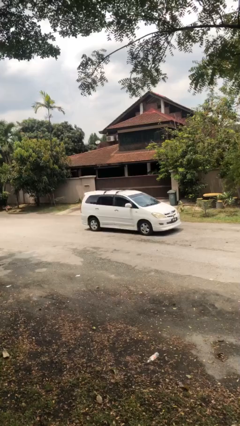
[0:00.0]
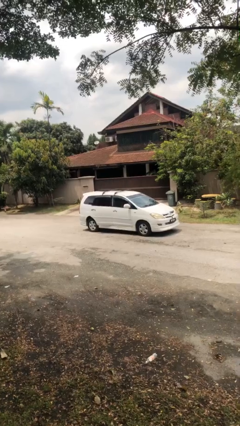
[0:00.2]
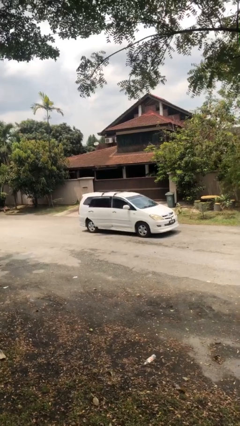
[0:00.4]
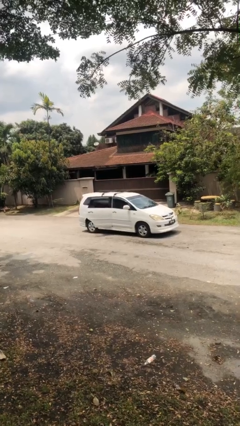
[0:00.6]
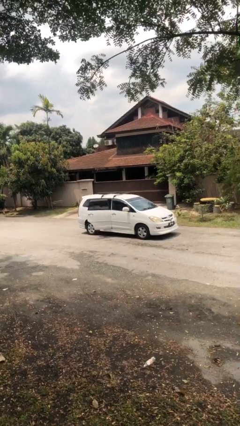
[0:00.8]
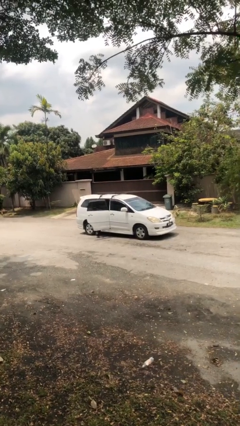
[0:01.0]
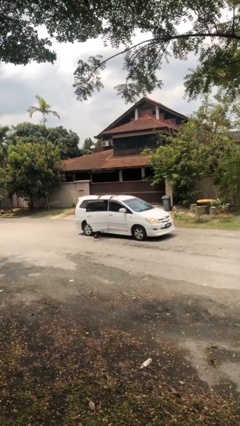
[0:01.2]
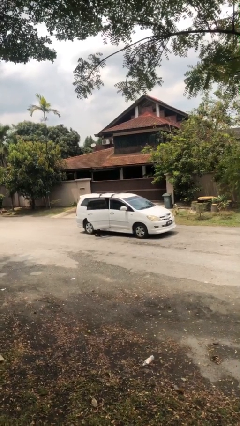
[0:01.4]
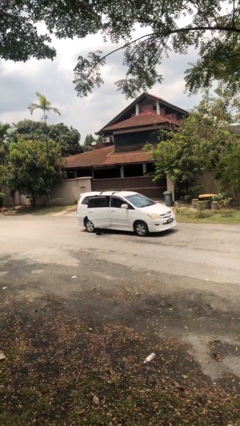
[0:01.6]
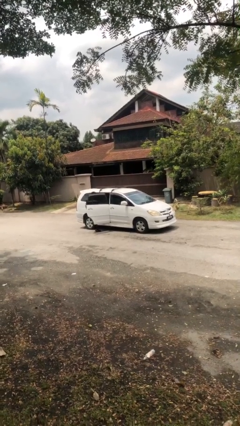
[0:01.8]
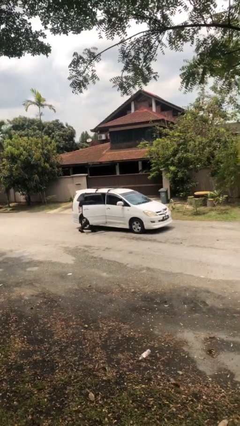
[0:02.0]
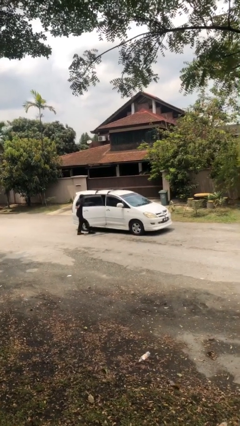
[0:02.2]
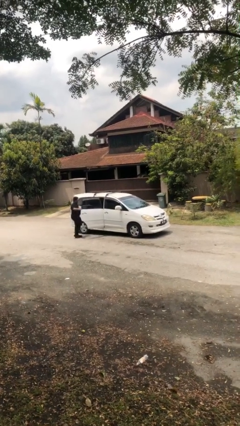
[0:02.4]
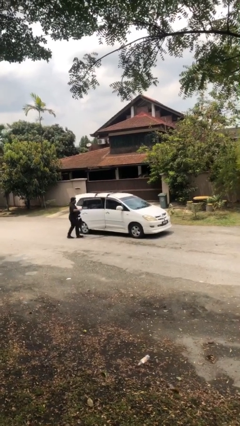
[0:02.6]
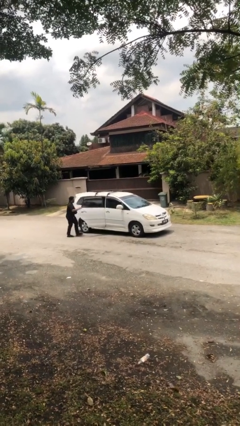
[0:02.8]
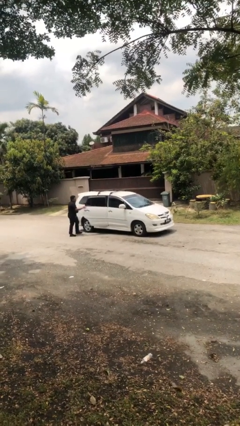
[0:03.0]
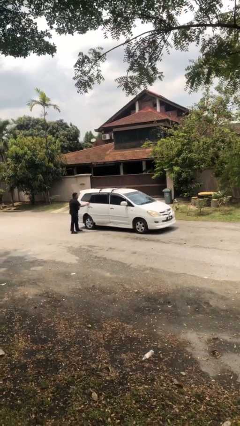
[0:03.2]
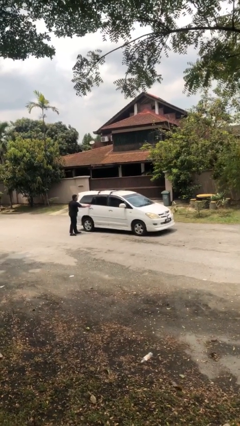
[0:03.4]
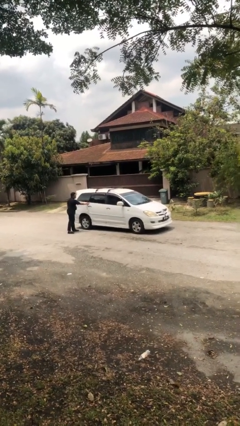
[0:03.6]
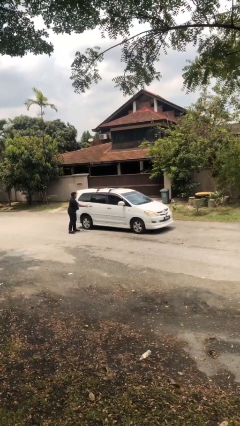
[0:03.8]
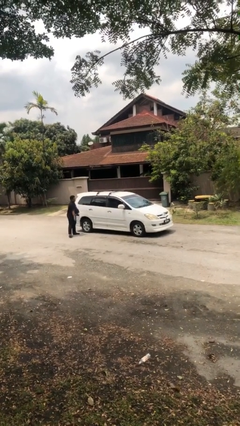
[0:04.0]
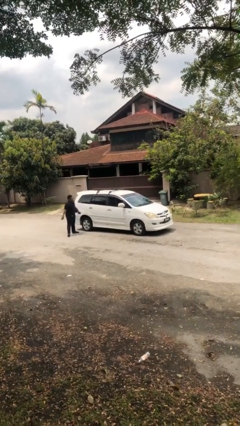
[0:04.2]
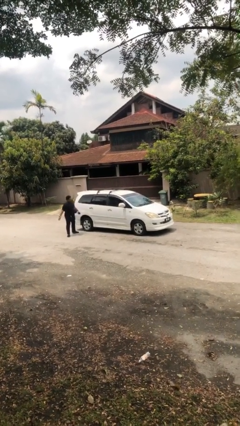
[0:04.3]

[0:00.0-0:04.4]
car drops off person

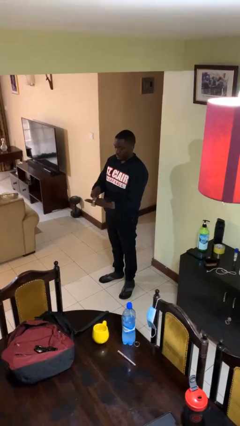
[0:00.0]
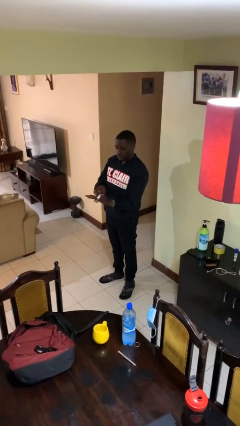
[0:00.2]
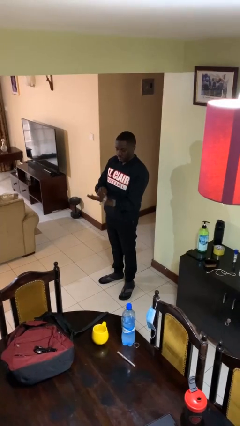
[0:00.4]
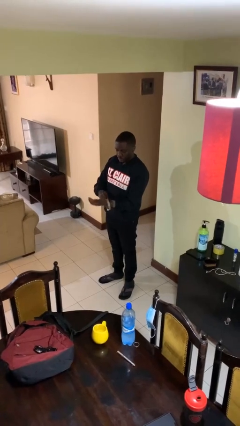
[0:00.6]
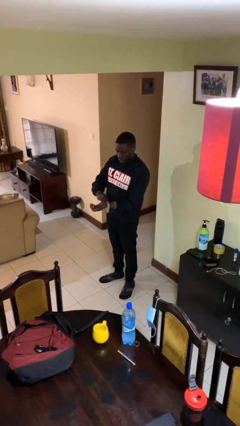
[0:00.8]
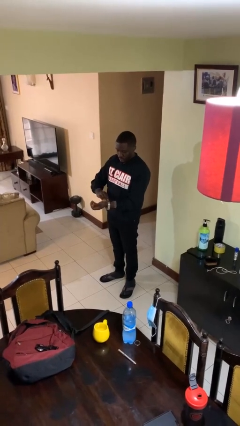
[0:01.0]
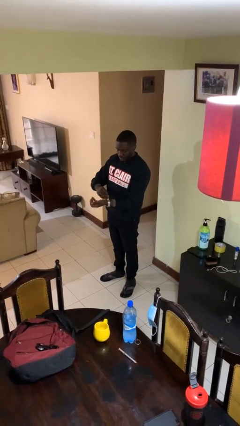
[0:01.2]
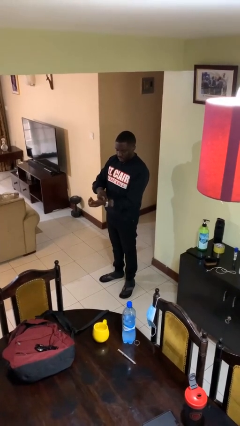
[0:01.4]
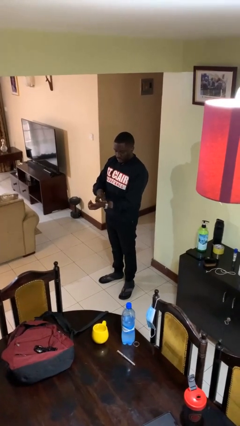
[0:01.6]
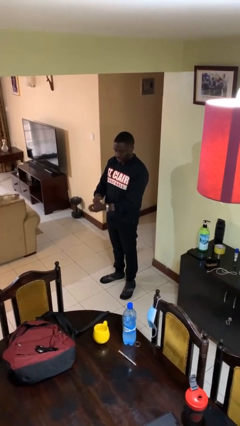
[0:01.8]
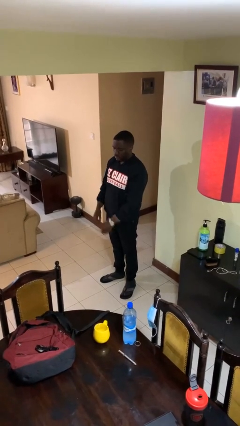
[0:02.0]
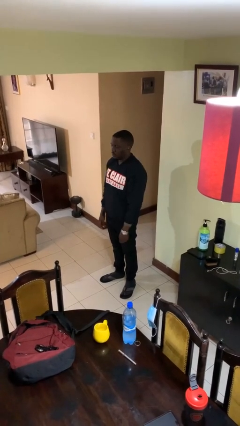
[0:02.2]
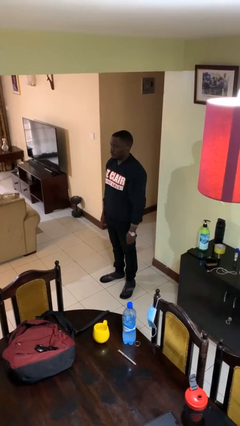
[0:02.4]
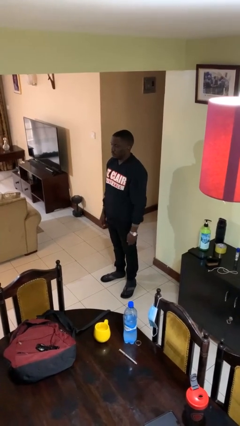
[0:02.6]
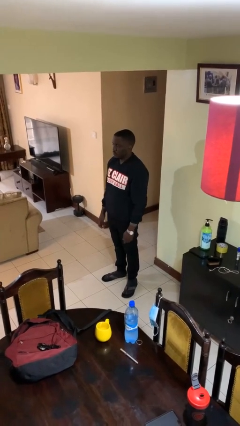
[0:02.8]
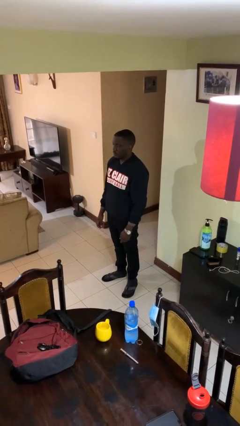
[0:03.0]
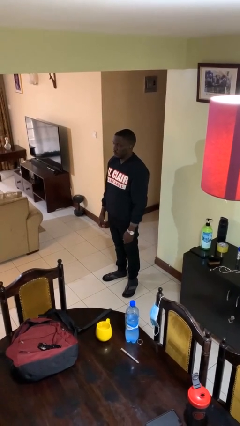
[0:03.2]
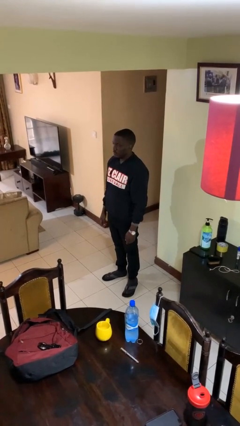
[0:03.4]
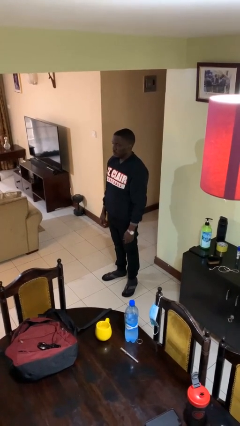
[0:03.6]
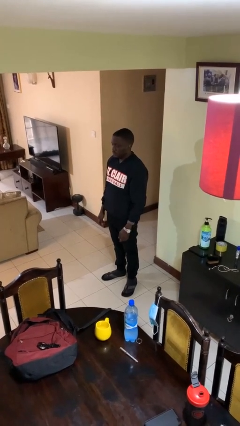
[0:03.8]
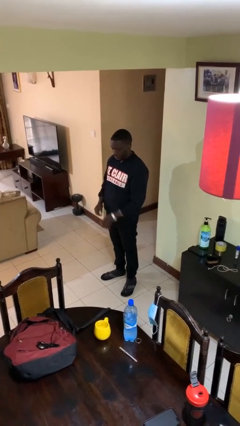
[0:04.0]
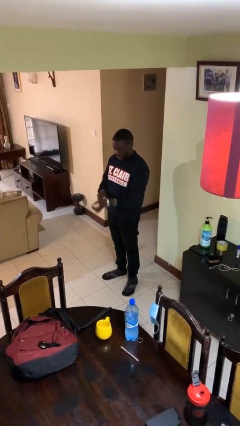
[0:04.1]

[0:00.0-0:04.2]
person puts on wristwatch

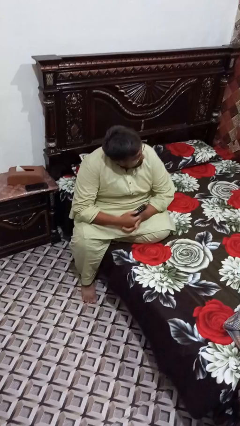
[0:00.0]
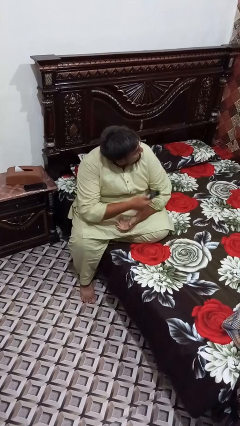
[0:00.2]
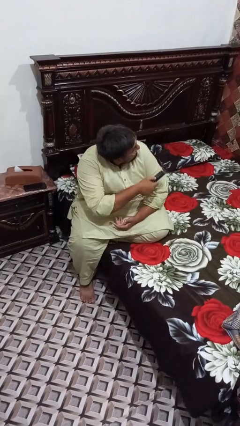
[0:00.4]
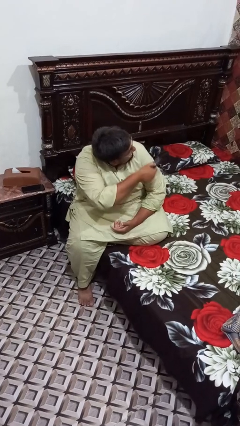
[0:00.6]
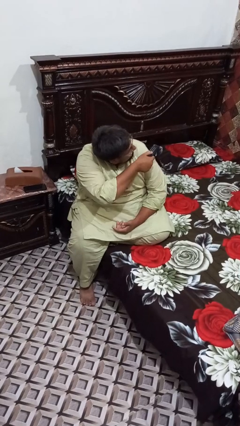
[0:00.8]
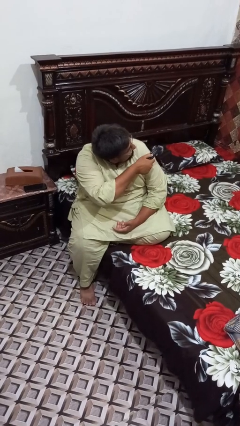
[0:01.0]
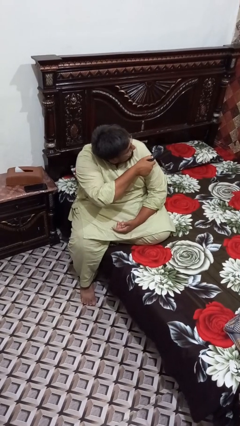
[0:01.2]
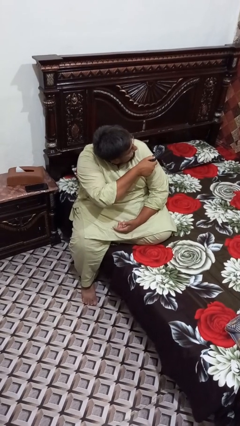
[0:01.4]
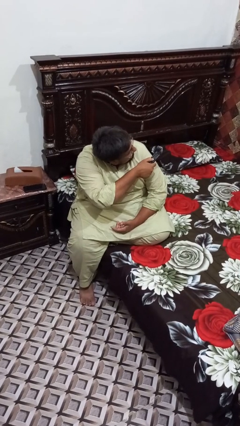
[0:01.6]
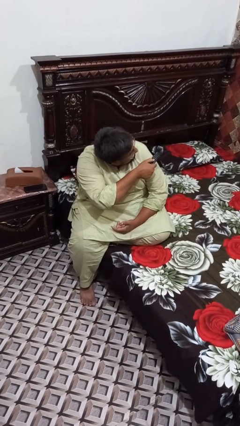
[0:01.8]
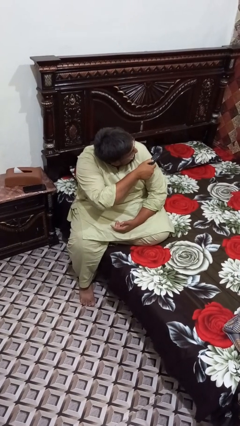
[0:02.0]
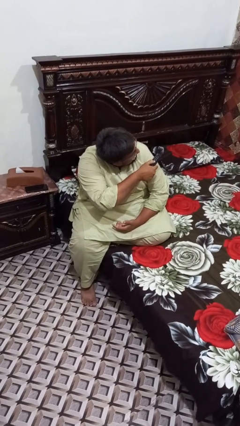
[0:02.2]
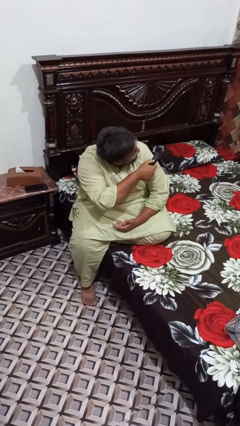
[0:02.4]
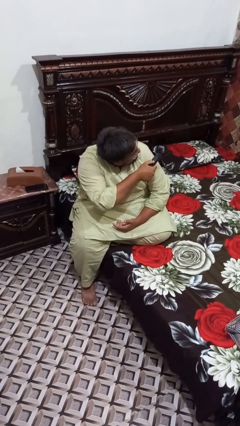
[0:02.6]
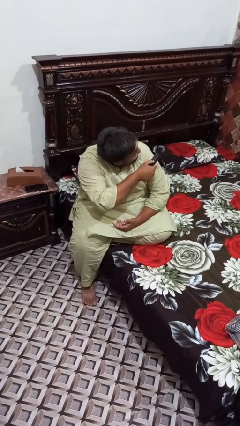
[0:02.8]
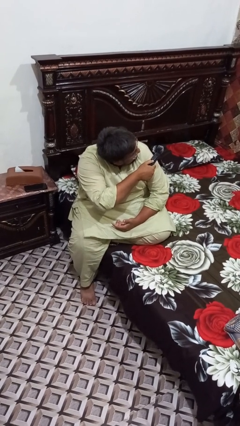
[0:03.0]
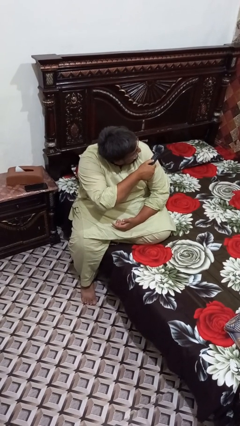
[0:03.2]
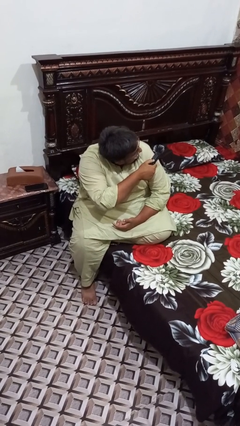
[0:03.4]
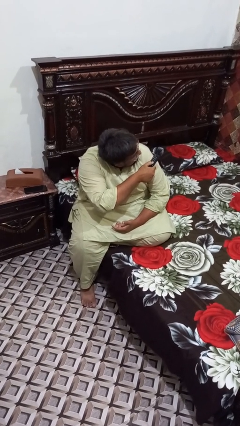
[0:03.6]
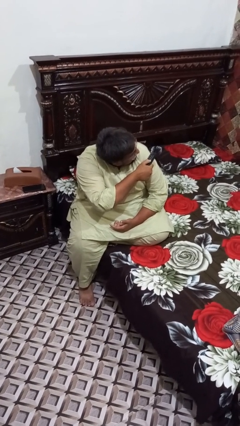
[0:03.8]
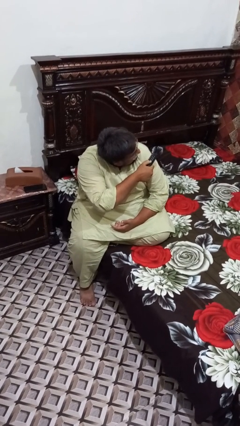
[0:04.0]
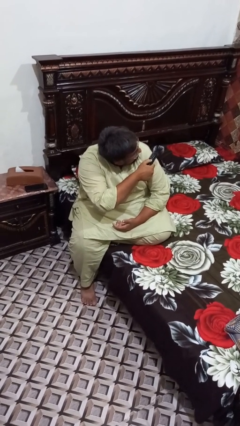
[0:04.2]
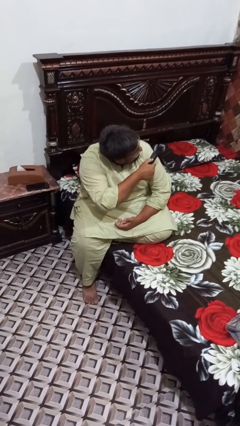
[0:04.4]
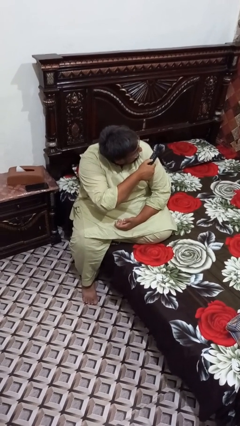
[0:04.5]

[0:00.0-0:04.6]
person uses television remote

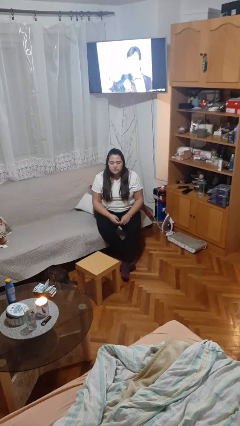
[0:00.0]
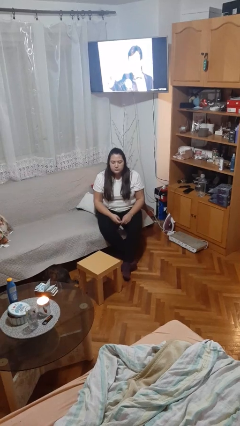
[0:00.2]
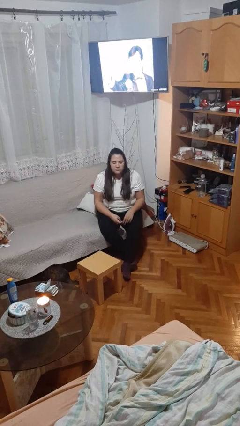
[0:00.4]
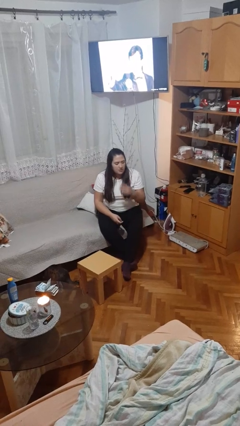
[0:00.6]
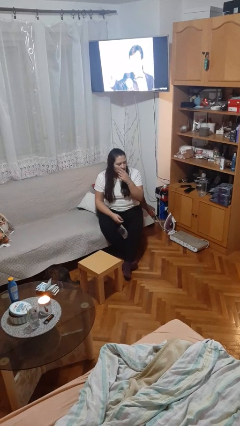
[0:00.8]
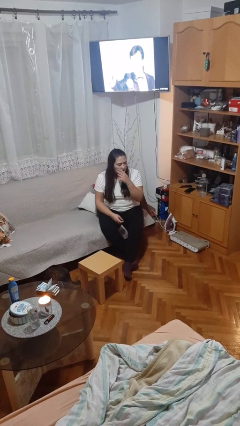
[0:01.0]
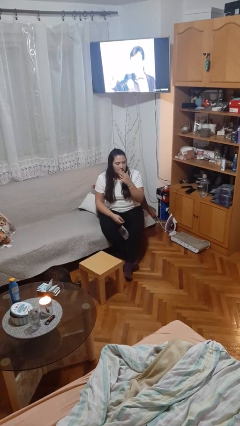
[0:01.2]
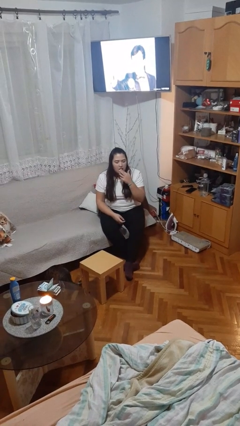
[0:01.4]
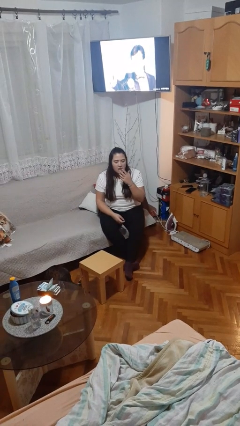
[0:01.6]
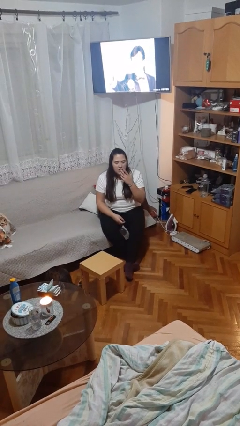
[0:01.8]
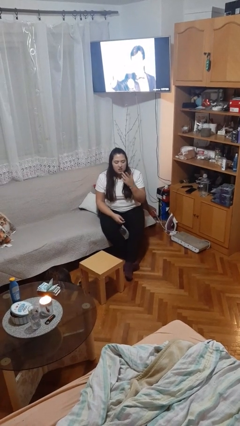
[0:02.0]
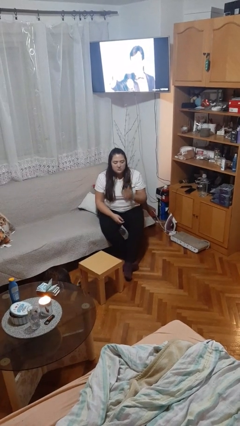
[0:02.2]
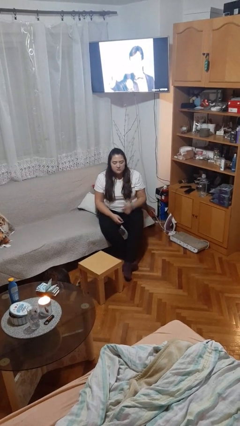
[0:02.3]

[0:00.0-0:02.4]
person licks fingers

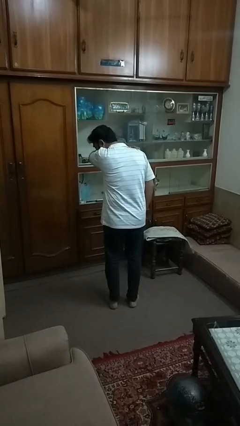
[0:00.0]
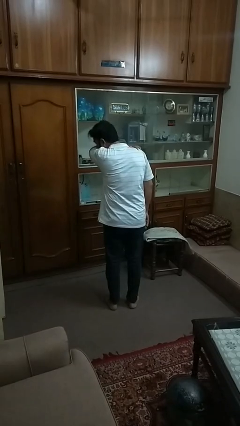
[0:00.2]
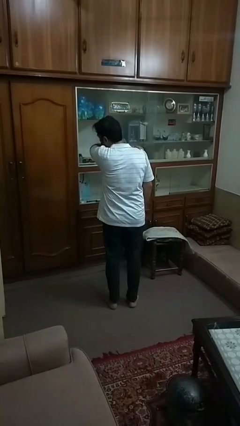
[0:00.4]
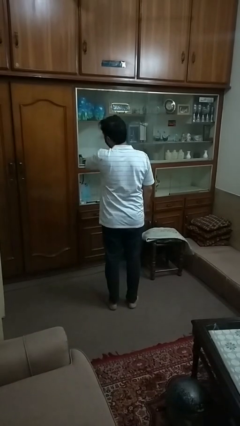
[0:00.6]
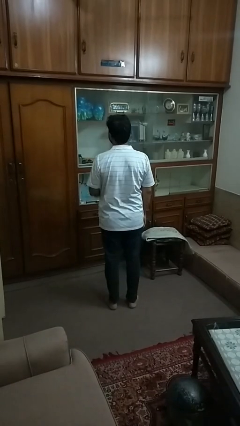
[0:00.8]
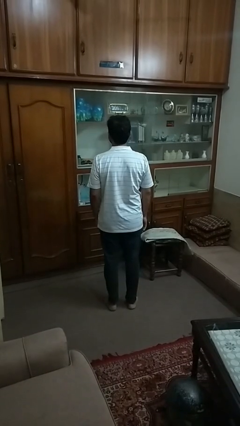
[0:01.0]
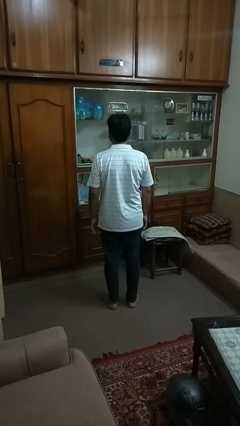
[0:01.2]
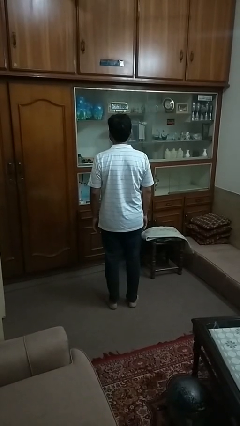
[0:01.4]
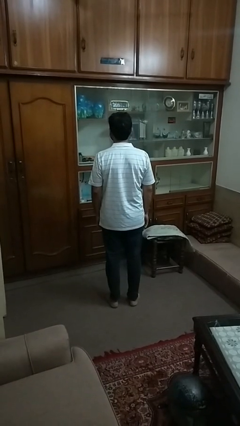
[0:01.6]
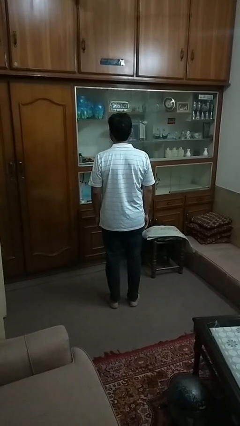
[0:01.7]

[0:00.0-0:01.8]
person sneezes into arm

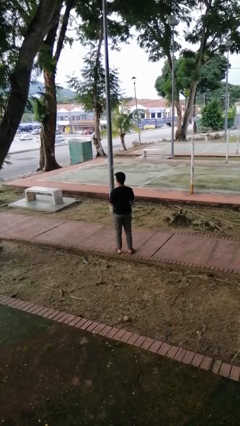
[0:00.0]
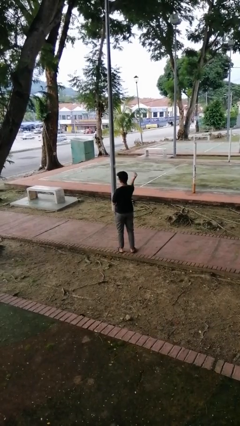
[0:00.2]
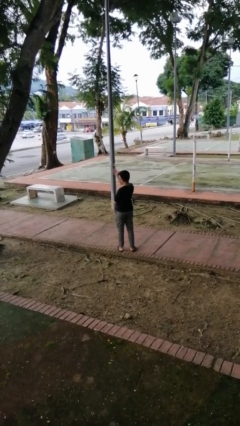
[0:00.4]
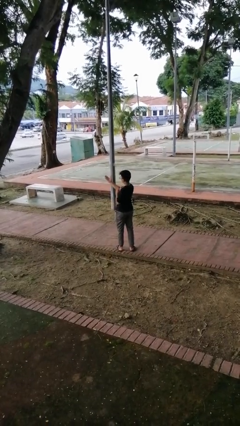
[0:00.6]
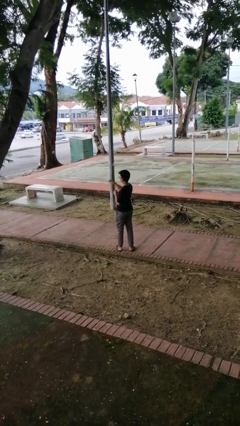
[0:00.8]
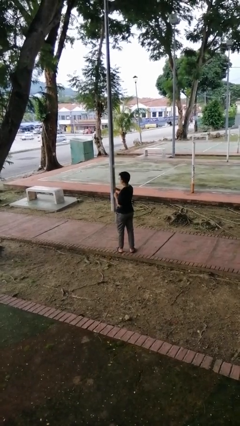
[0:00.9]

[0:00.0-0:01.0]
person karate chop
